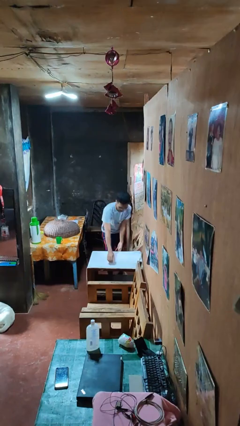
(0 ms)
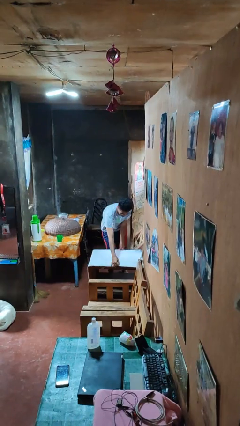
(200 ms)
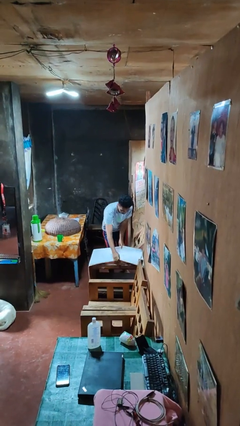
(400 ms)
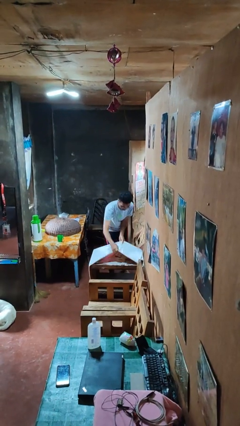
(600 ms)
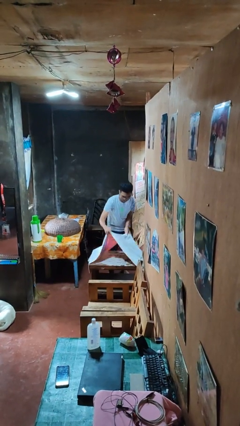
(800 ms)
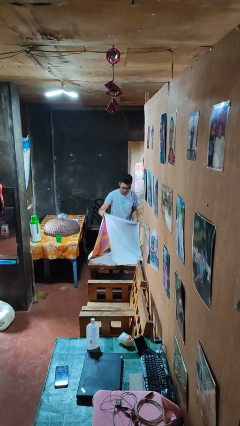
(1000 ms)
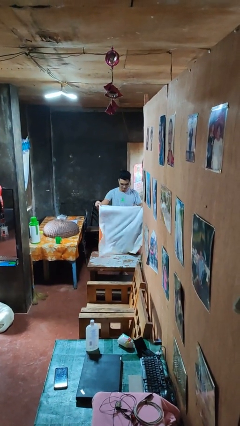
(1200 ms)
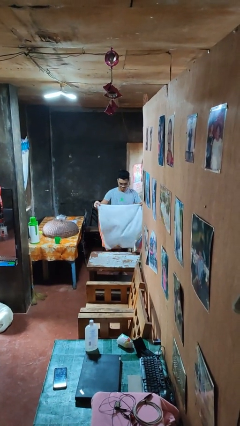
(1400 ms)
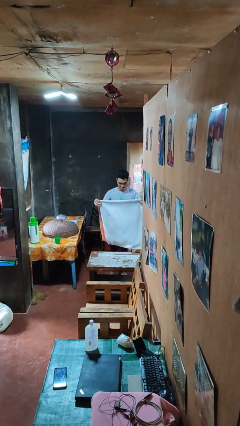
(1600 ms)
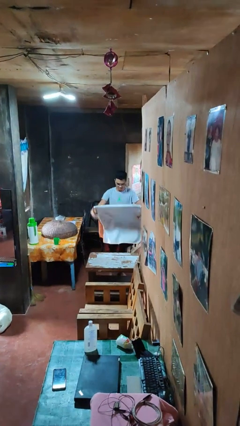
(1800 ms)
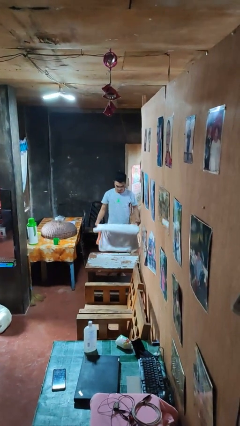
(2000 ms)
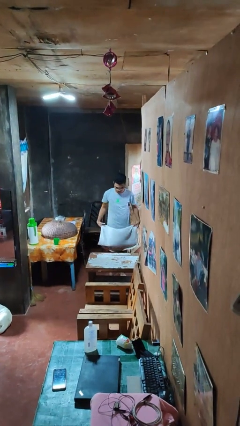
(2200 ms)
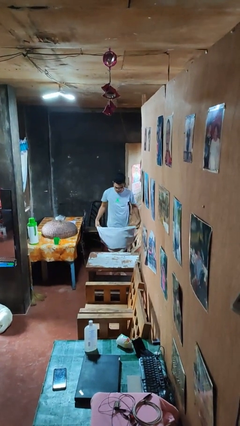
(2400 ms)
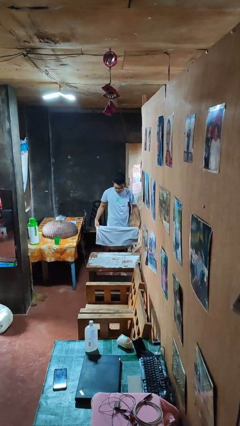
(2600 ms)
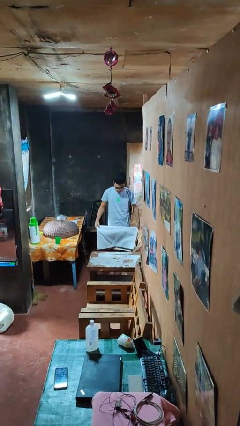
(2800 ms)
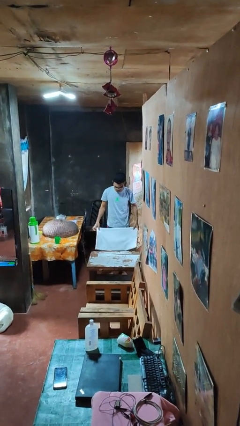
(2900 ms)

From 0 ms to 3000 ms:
person folds tablecloth

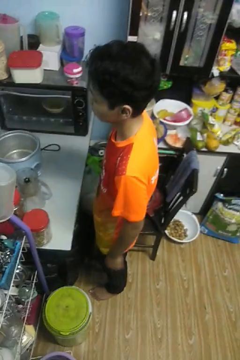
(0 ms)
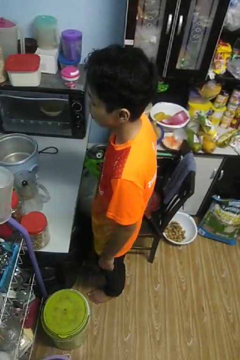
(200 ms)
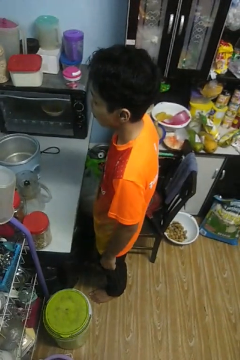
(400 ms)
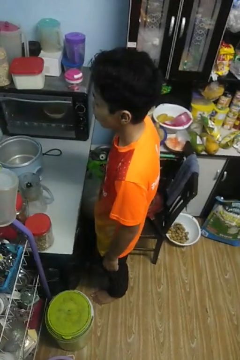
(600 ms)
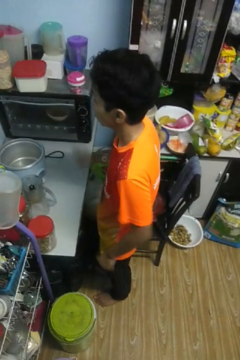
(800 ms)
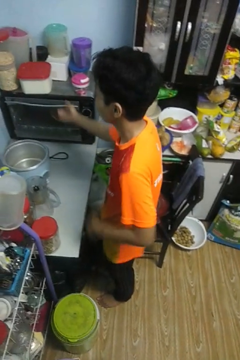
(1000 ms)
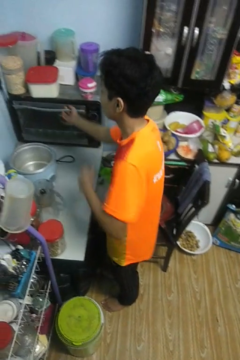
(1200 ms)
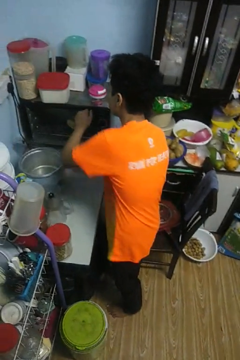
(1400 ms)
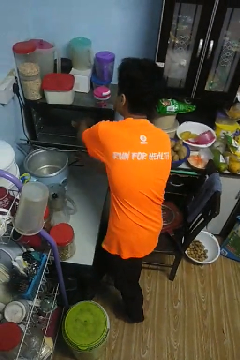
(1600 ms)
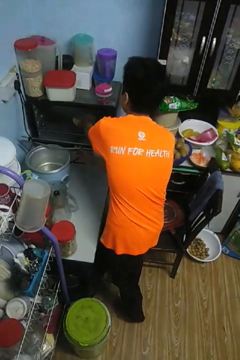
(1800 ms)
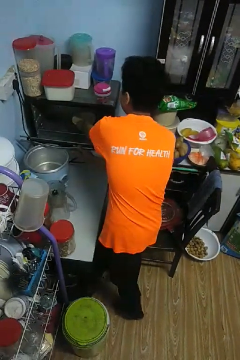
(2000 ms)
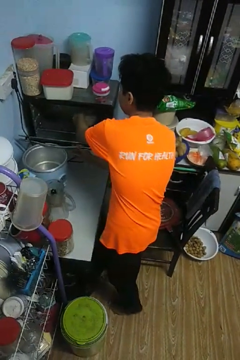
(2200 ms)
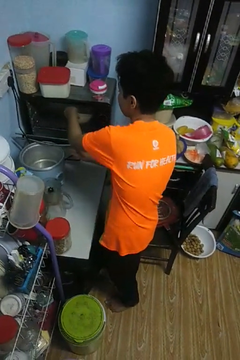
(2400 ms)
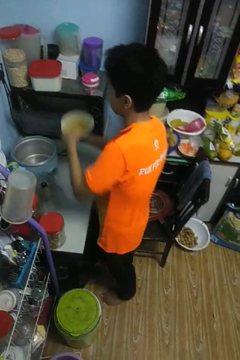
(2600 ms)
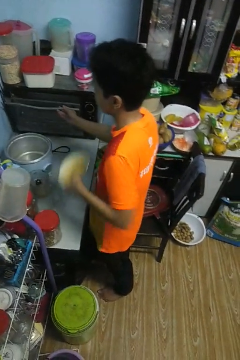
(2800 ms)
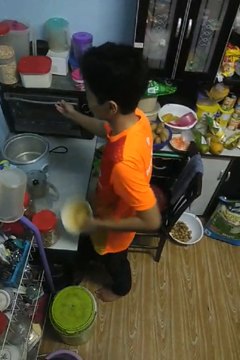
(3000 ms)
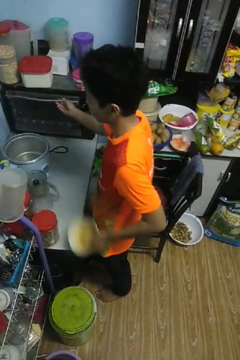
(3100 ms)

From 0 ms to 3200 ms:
person takes object from oven

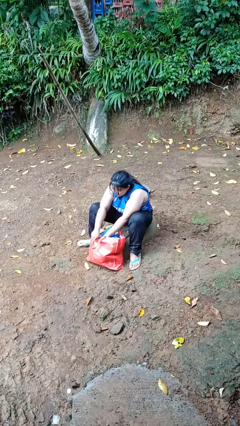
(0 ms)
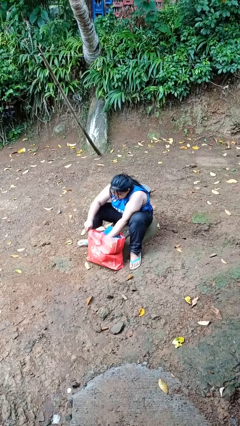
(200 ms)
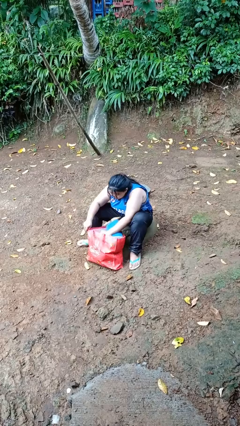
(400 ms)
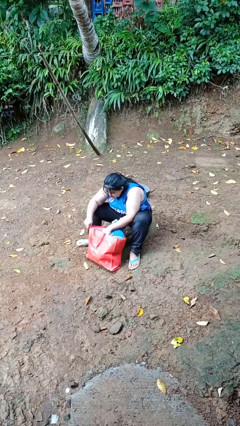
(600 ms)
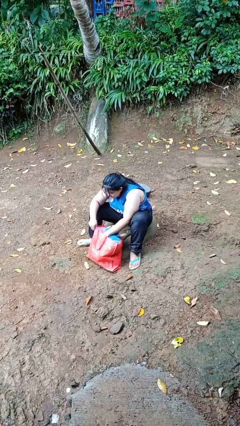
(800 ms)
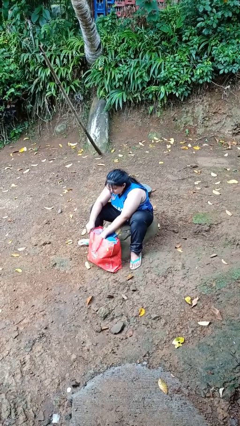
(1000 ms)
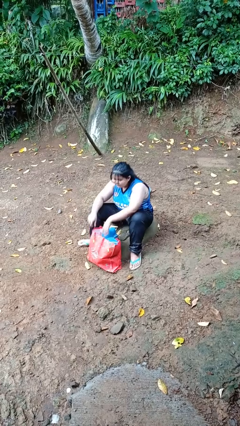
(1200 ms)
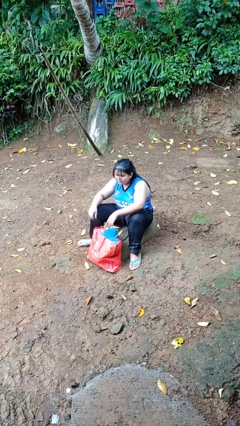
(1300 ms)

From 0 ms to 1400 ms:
person searches in bag

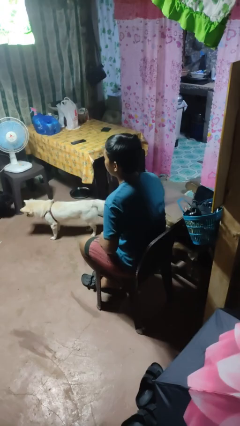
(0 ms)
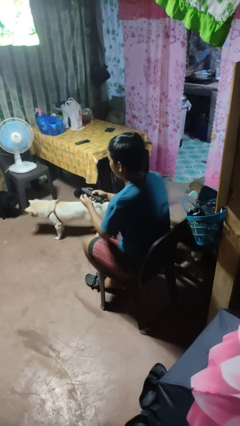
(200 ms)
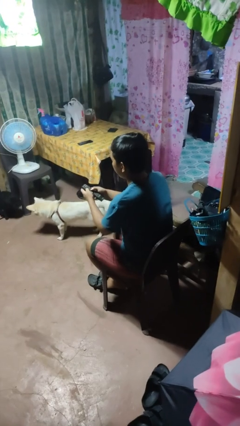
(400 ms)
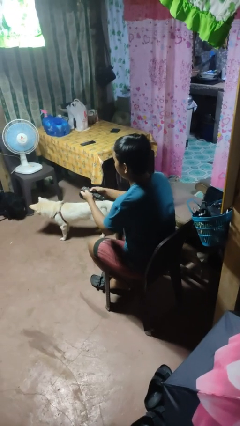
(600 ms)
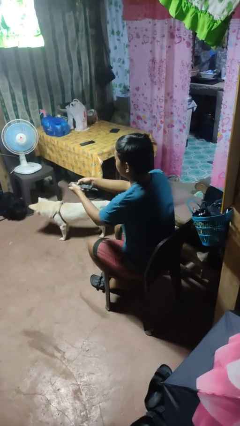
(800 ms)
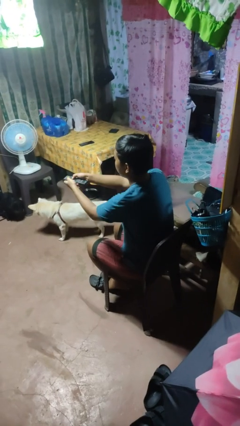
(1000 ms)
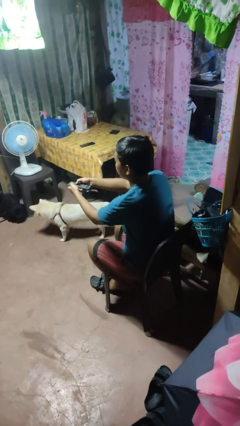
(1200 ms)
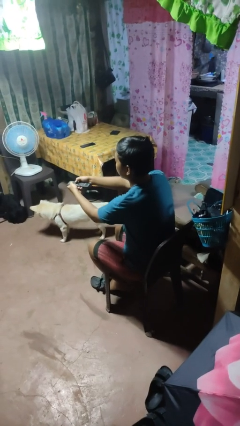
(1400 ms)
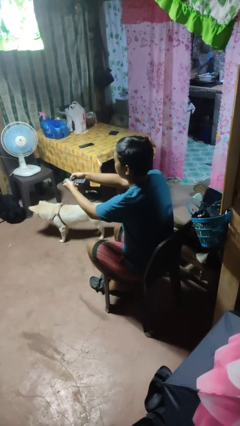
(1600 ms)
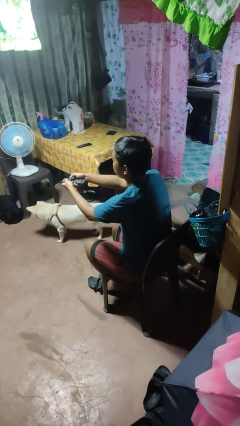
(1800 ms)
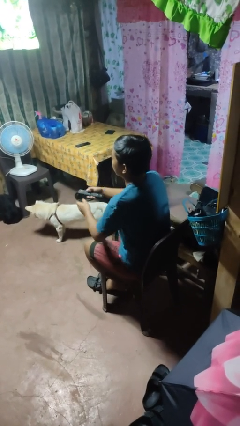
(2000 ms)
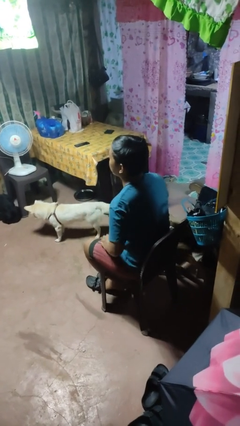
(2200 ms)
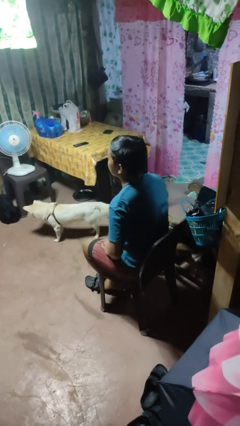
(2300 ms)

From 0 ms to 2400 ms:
person uses television remote

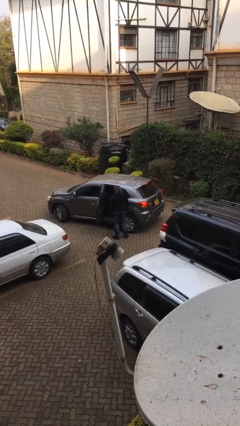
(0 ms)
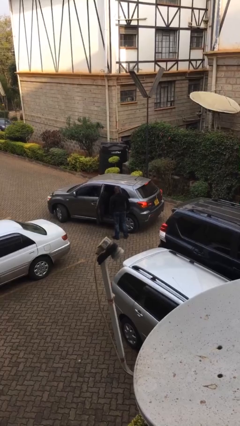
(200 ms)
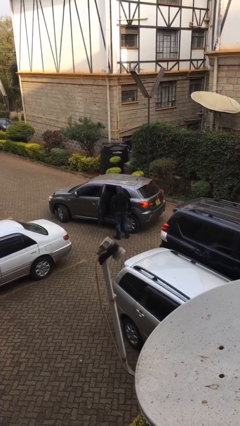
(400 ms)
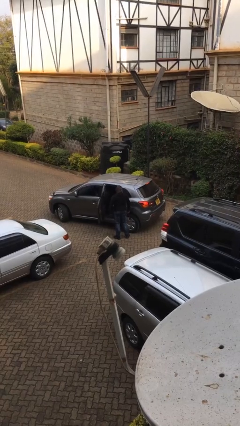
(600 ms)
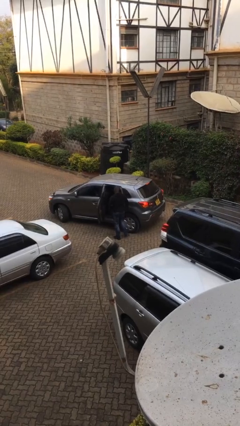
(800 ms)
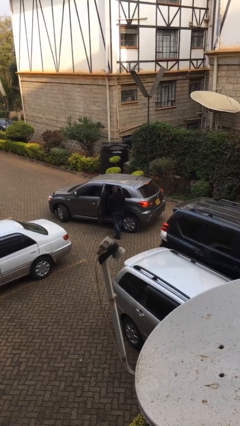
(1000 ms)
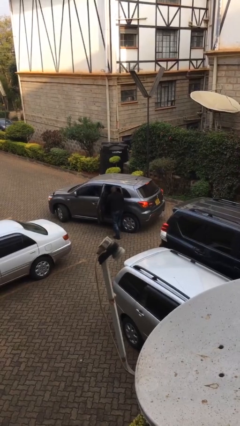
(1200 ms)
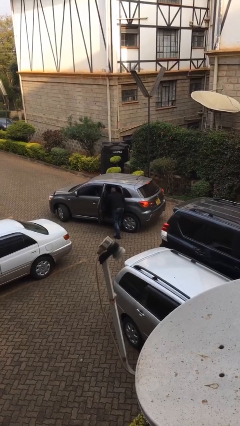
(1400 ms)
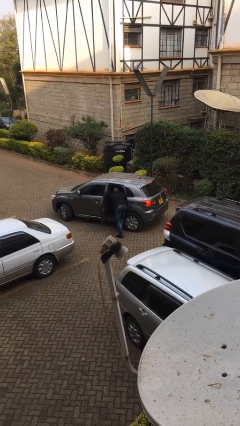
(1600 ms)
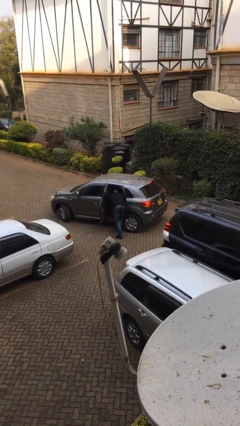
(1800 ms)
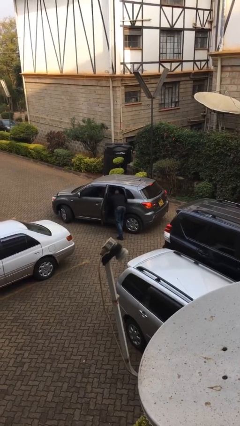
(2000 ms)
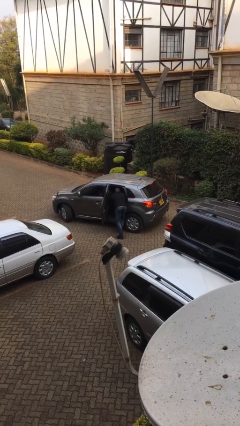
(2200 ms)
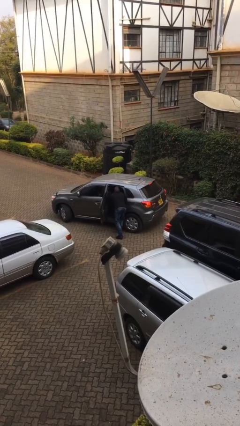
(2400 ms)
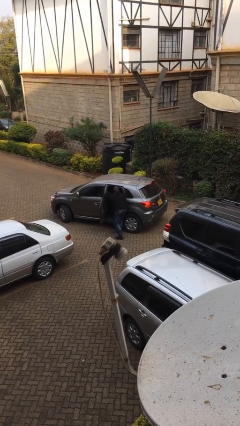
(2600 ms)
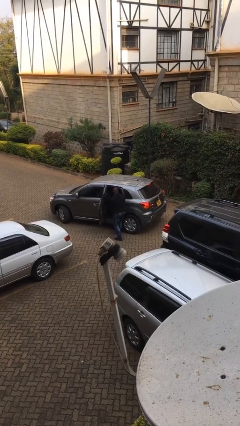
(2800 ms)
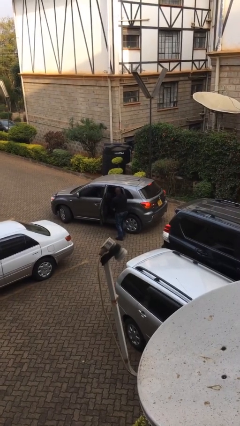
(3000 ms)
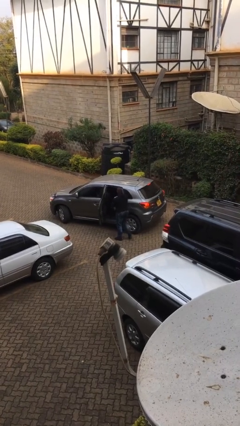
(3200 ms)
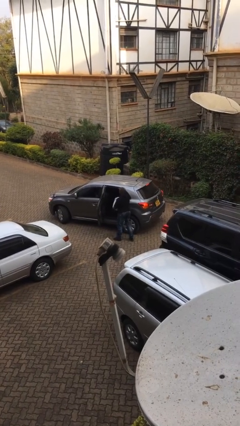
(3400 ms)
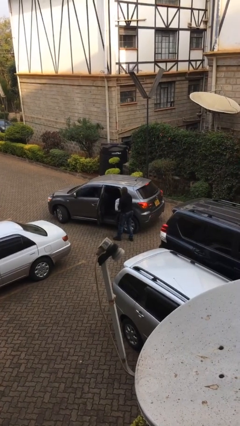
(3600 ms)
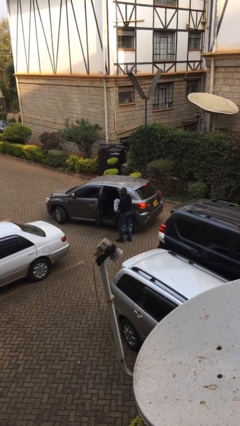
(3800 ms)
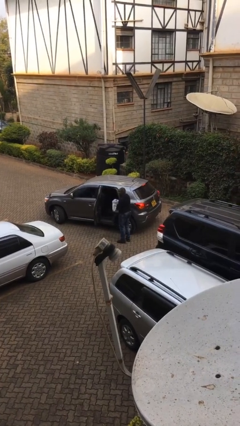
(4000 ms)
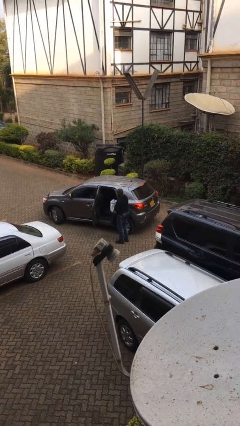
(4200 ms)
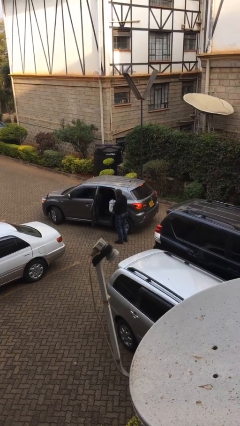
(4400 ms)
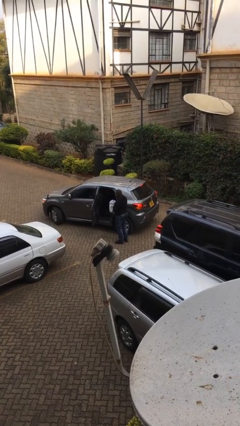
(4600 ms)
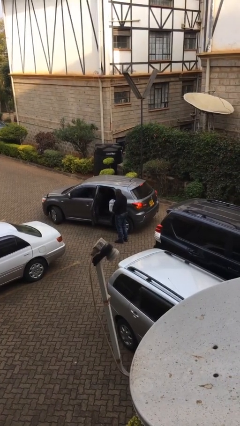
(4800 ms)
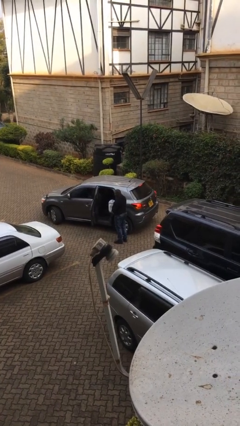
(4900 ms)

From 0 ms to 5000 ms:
person unloads car

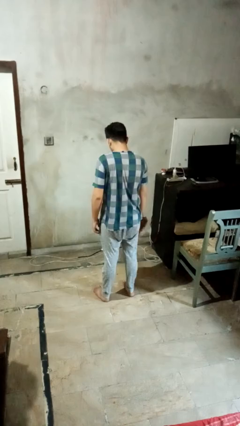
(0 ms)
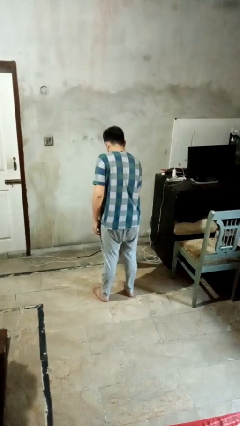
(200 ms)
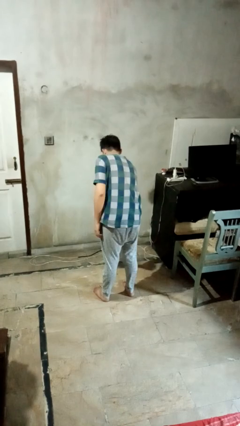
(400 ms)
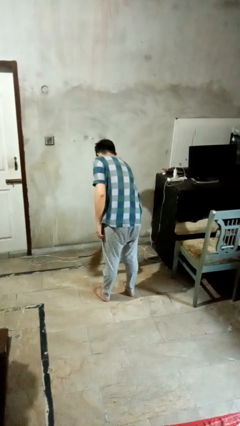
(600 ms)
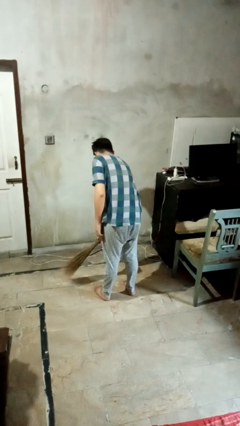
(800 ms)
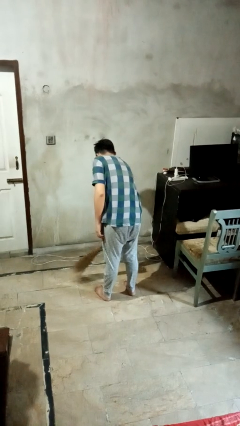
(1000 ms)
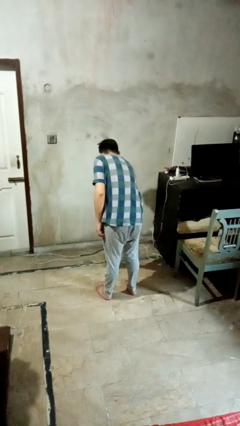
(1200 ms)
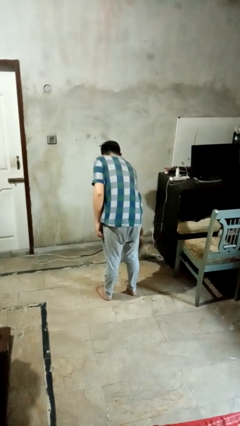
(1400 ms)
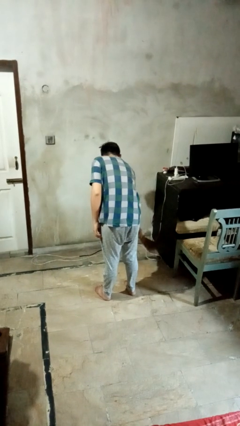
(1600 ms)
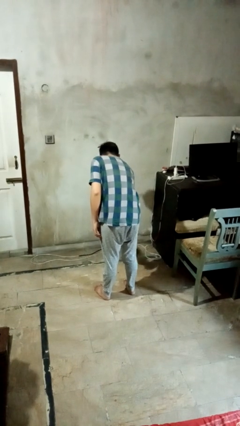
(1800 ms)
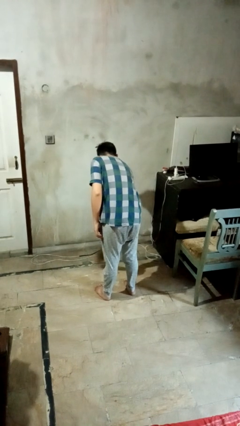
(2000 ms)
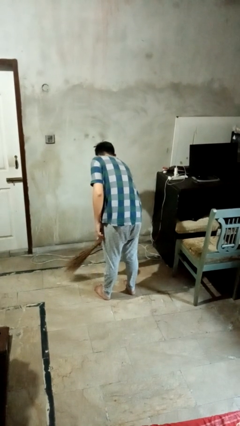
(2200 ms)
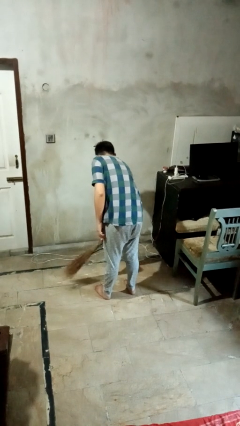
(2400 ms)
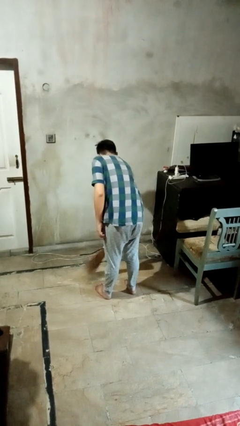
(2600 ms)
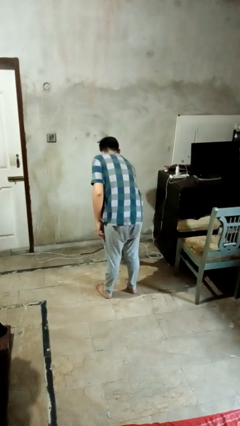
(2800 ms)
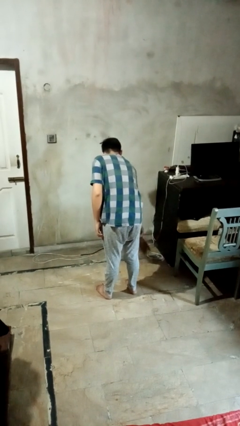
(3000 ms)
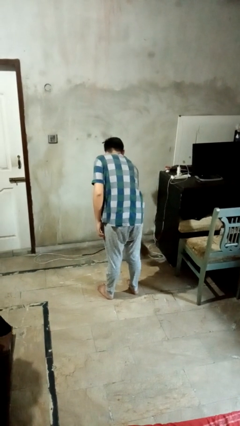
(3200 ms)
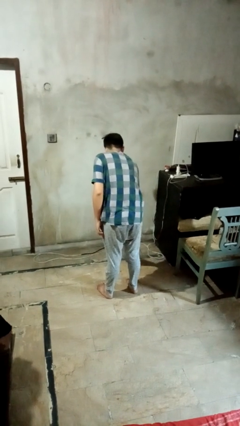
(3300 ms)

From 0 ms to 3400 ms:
person sweeps floor
